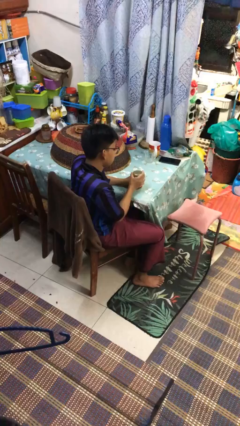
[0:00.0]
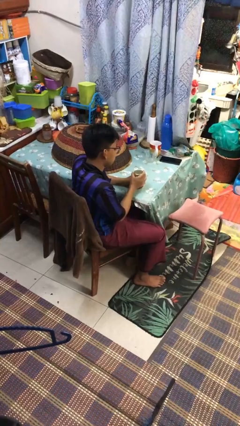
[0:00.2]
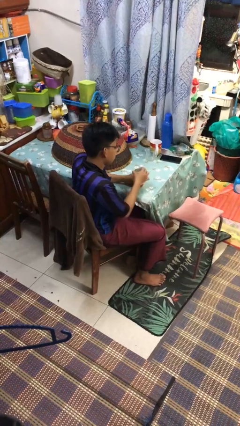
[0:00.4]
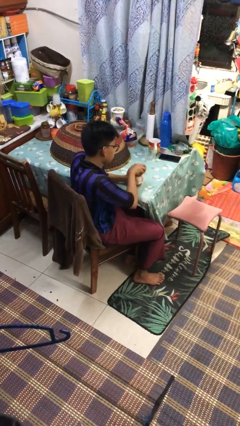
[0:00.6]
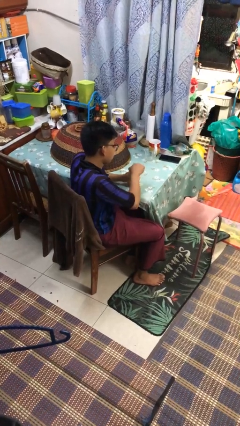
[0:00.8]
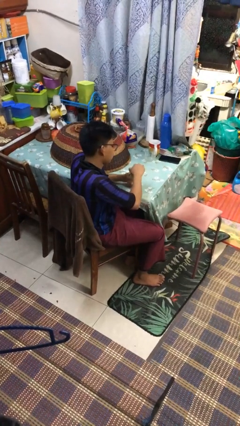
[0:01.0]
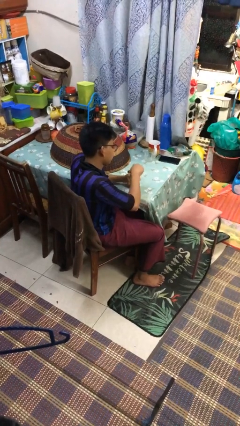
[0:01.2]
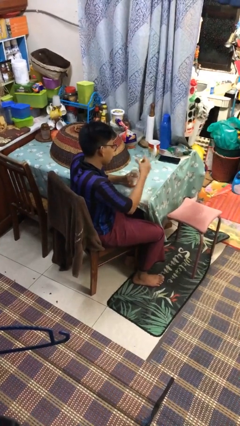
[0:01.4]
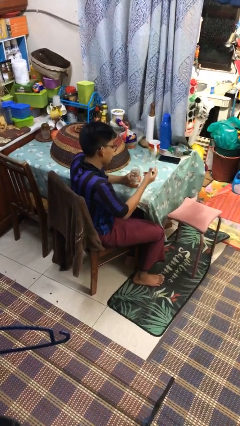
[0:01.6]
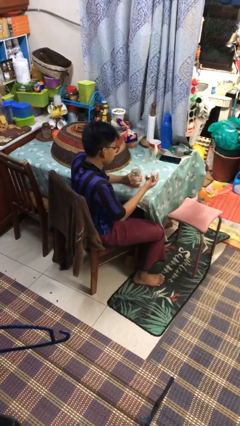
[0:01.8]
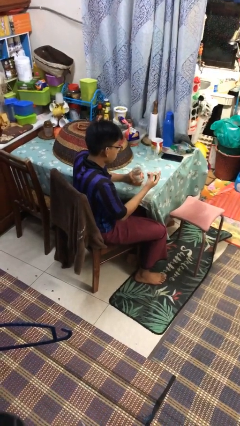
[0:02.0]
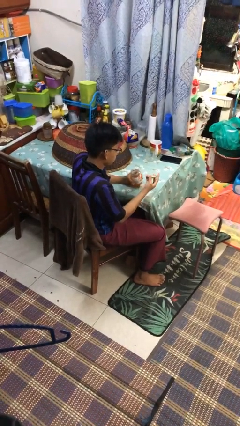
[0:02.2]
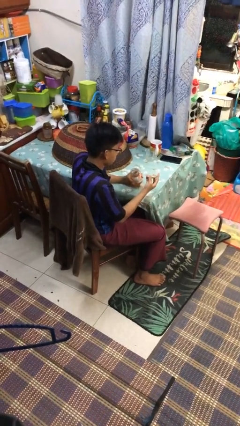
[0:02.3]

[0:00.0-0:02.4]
person opens jar

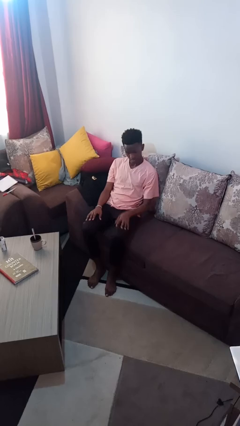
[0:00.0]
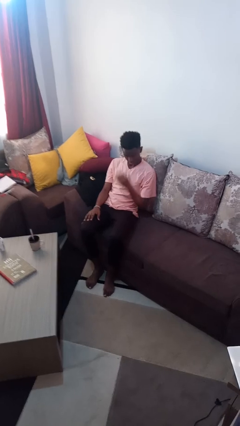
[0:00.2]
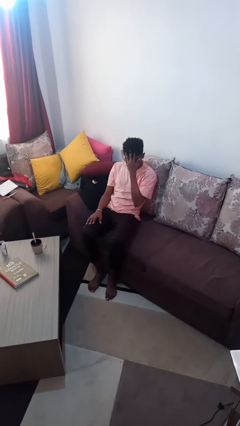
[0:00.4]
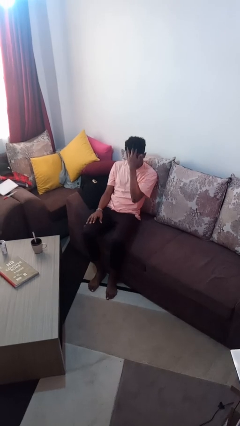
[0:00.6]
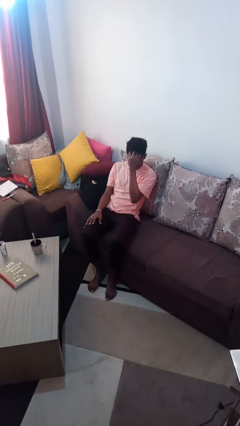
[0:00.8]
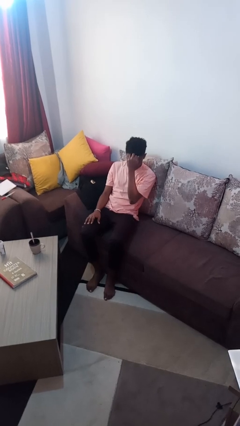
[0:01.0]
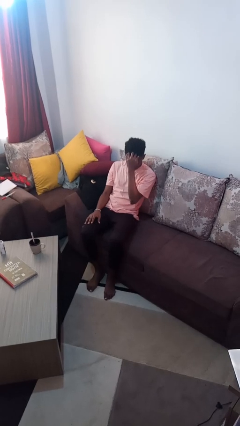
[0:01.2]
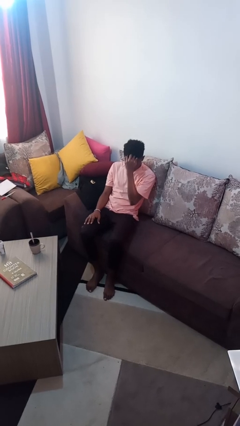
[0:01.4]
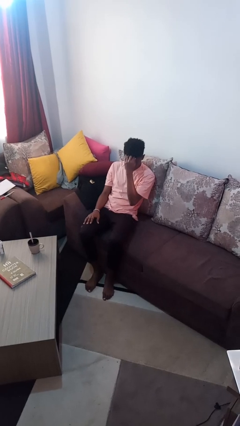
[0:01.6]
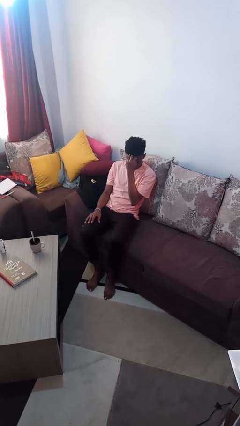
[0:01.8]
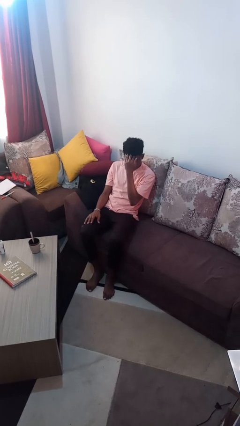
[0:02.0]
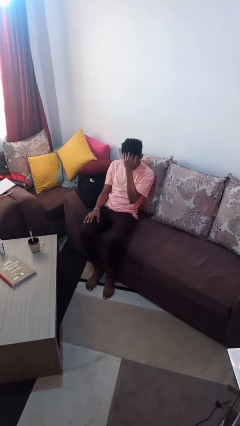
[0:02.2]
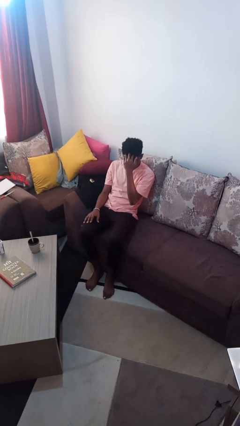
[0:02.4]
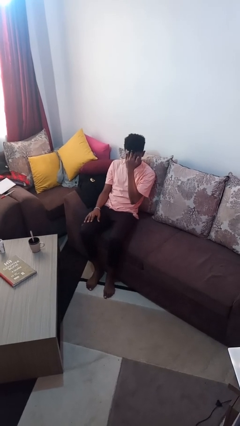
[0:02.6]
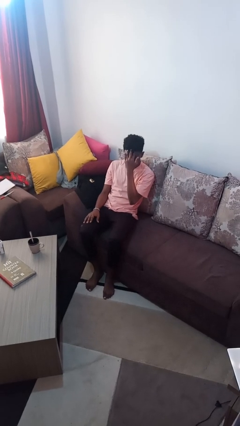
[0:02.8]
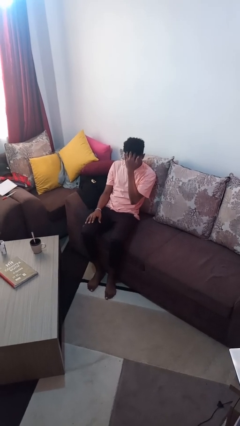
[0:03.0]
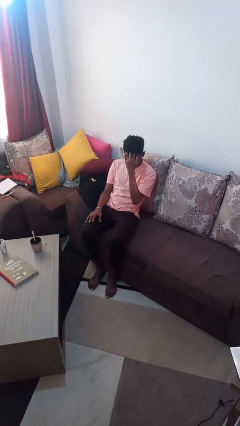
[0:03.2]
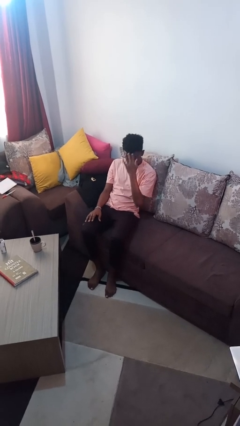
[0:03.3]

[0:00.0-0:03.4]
person strokes hair

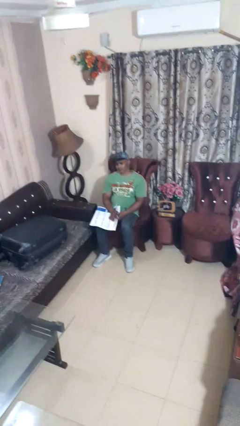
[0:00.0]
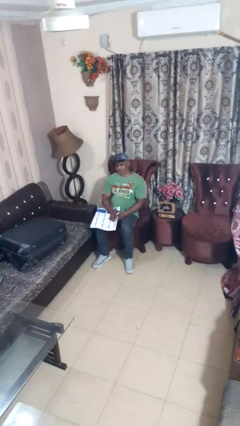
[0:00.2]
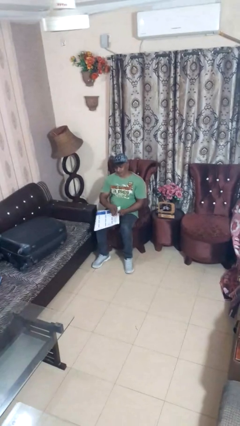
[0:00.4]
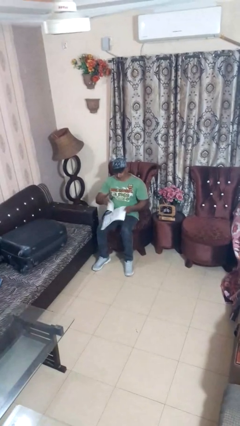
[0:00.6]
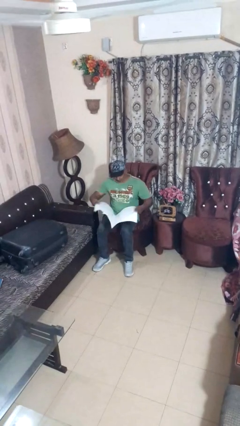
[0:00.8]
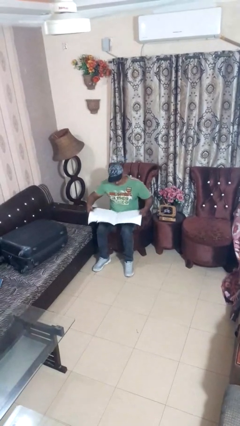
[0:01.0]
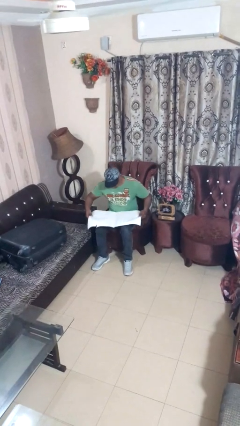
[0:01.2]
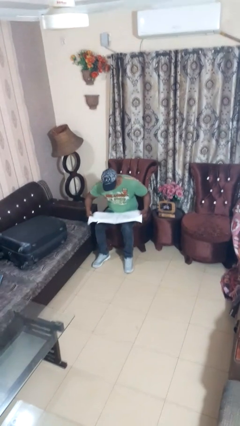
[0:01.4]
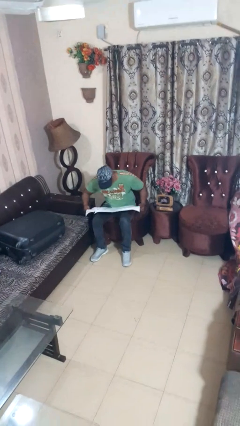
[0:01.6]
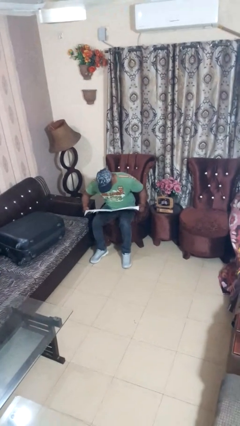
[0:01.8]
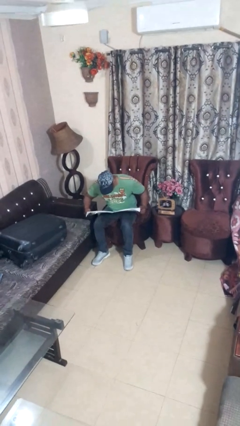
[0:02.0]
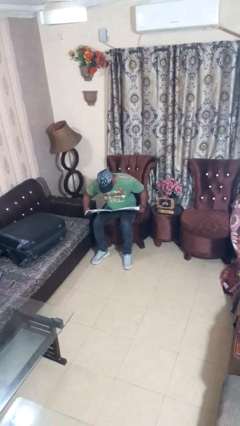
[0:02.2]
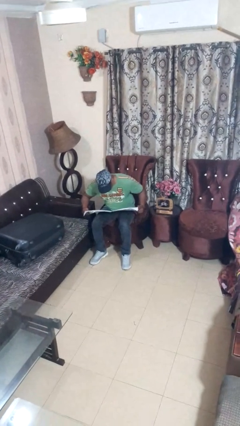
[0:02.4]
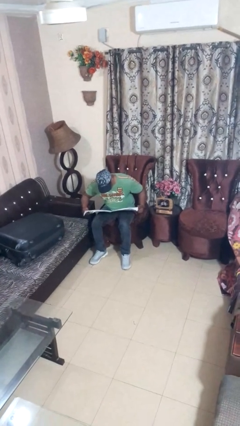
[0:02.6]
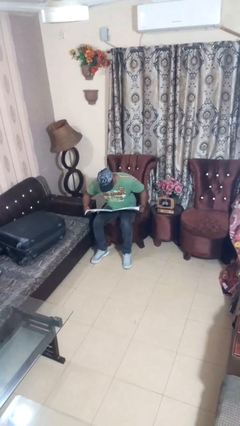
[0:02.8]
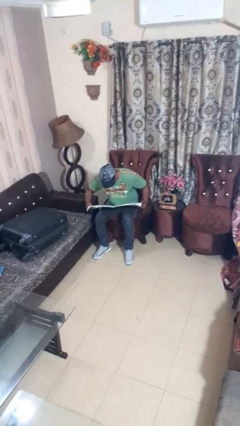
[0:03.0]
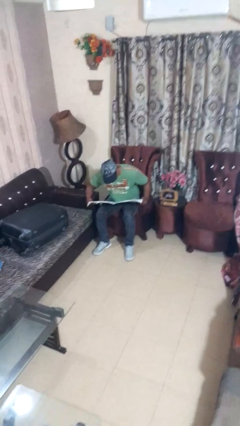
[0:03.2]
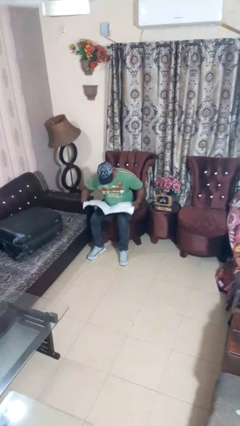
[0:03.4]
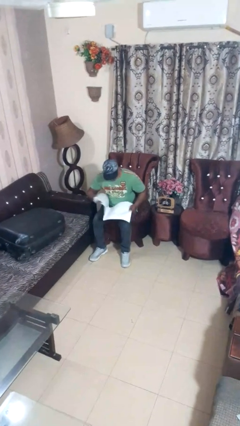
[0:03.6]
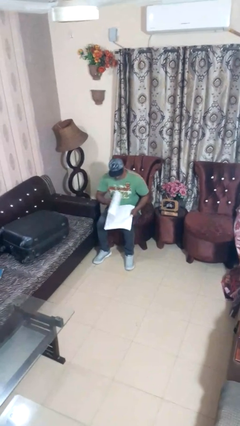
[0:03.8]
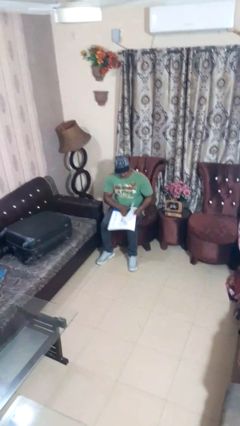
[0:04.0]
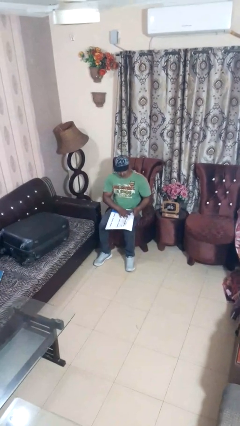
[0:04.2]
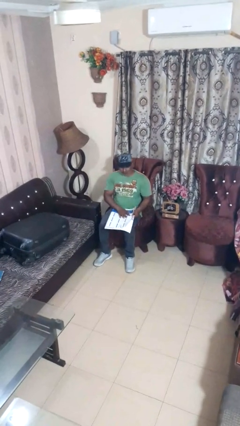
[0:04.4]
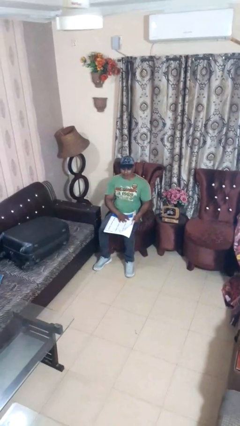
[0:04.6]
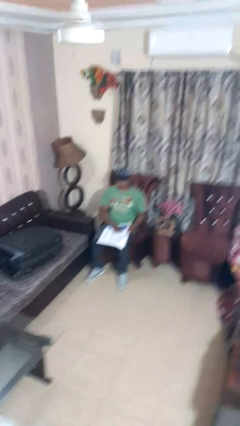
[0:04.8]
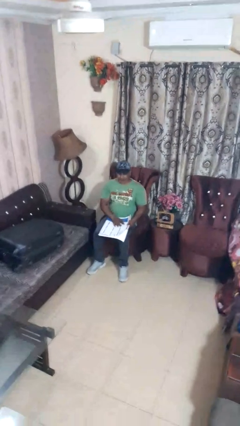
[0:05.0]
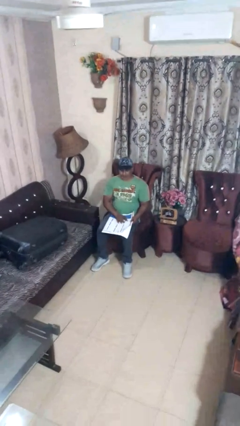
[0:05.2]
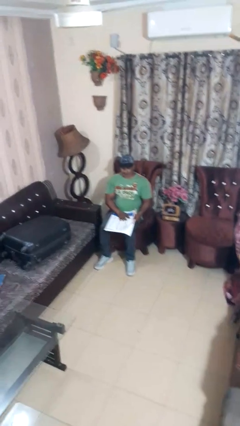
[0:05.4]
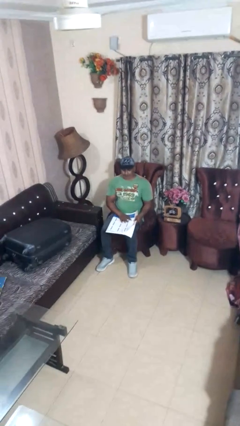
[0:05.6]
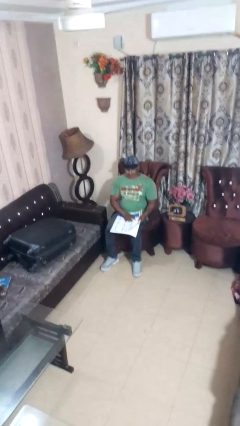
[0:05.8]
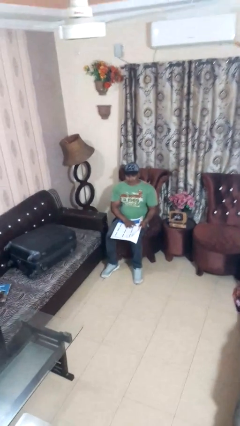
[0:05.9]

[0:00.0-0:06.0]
person reads newspaper

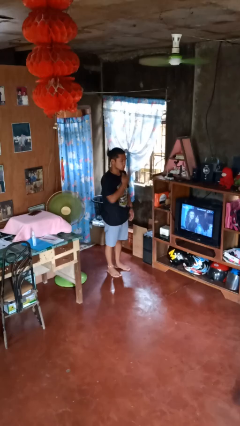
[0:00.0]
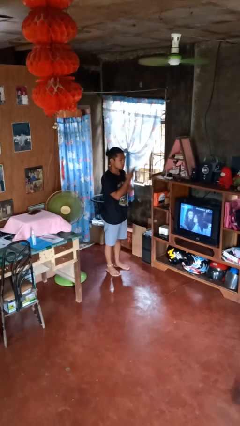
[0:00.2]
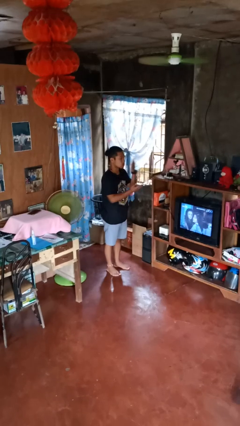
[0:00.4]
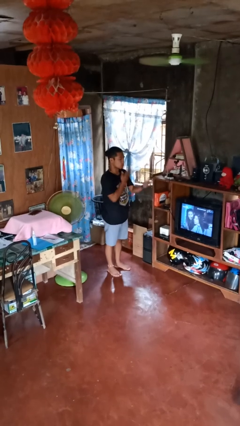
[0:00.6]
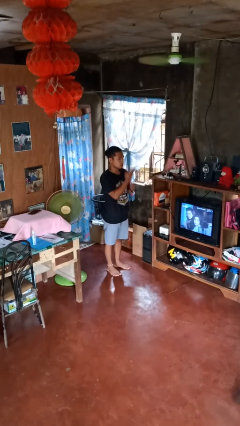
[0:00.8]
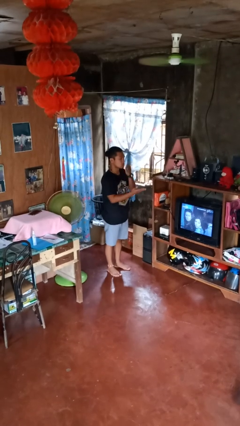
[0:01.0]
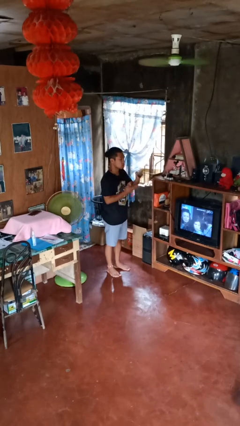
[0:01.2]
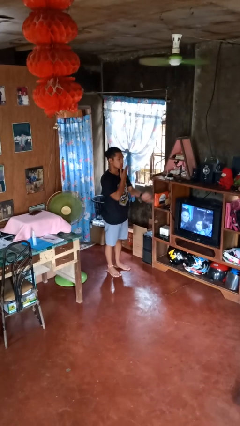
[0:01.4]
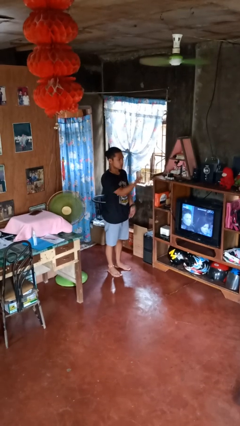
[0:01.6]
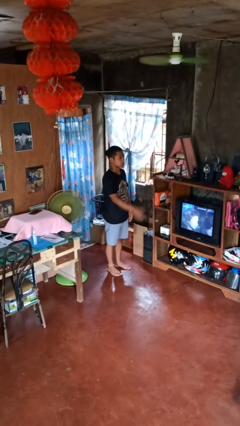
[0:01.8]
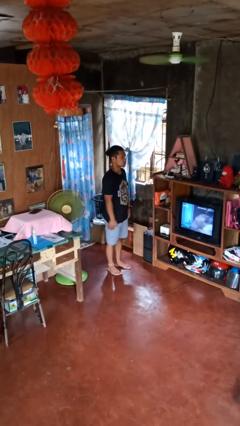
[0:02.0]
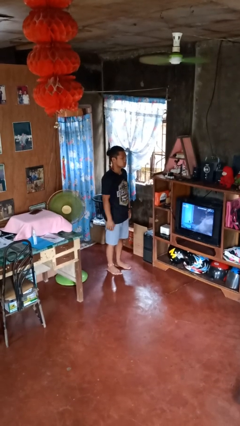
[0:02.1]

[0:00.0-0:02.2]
person gestures blow kiss

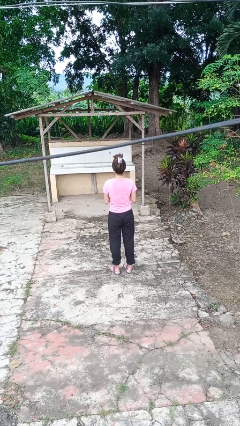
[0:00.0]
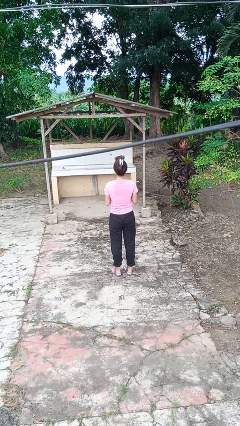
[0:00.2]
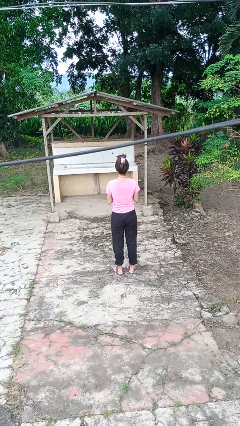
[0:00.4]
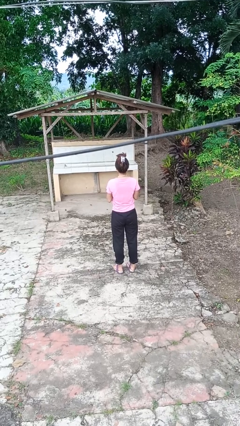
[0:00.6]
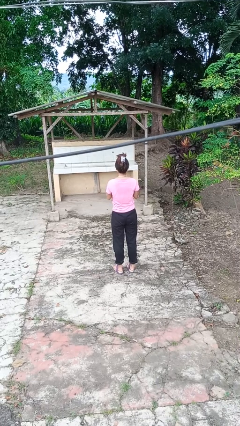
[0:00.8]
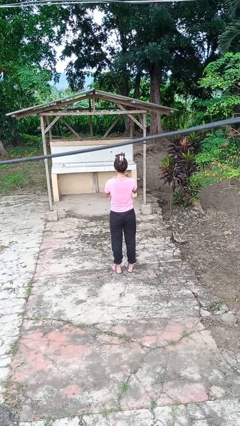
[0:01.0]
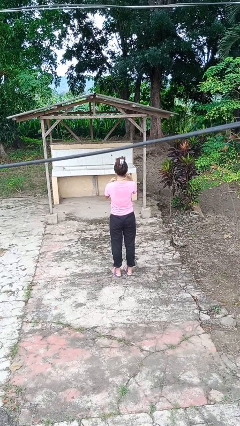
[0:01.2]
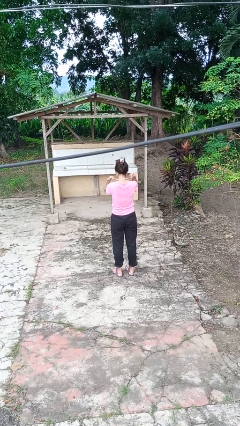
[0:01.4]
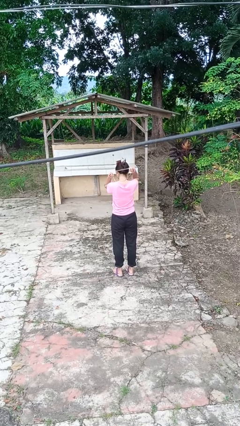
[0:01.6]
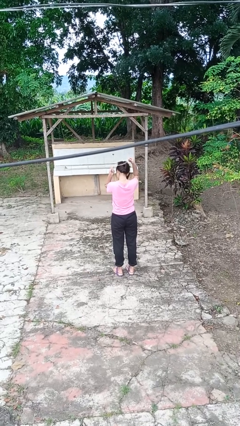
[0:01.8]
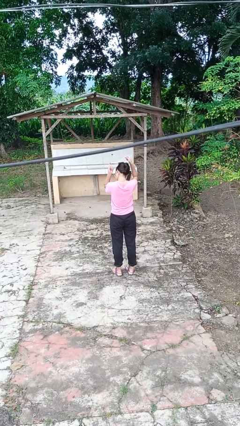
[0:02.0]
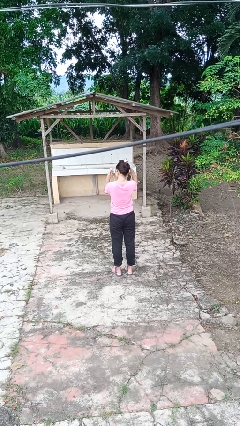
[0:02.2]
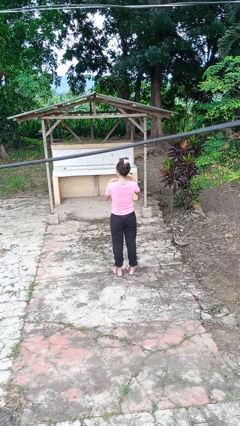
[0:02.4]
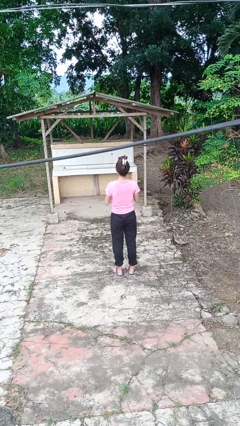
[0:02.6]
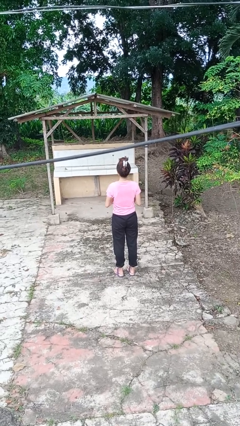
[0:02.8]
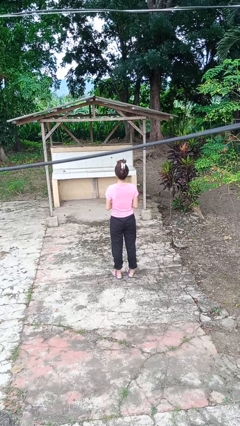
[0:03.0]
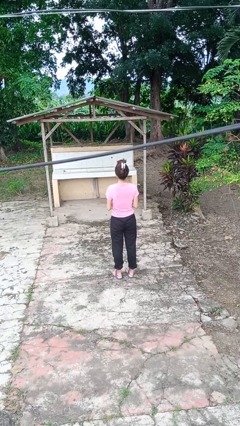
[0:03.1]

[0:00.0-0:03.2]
person takes off necklace

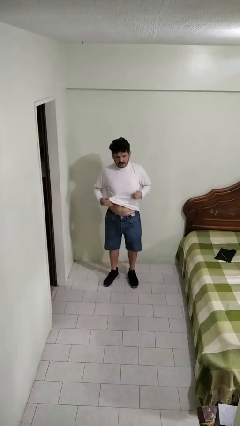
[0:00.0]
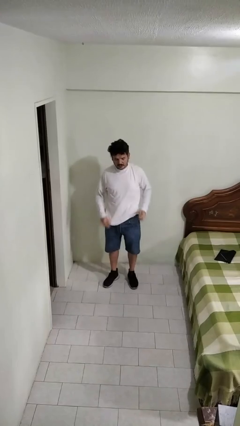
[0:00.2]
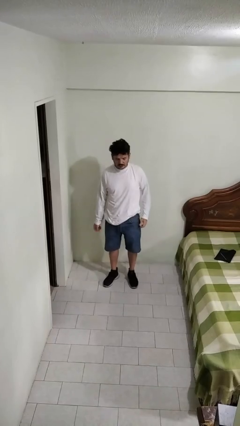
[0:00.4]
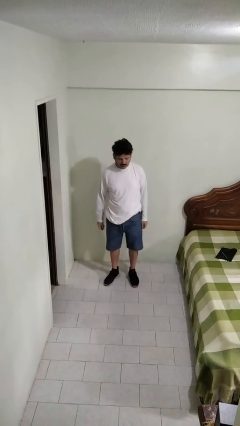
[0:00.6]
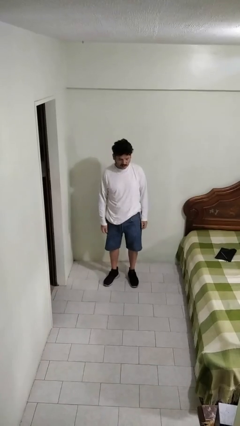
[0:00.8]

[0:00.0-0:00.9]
person untucks shirt
